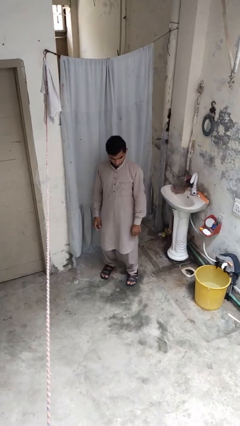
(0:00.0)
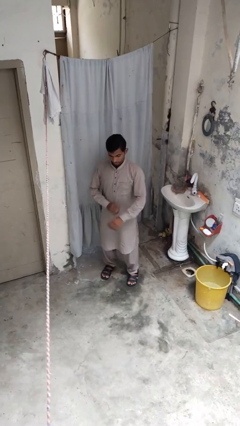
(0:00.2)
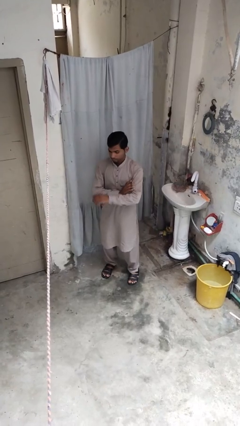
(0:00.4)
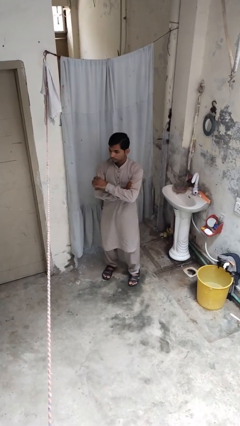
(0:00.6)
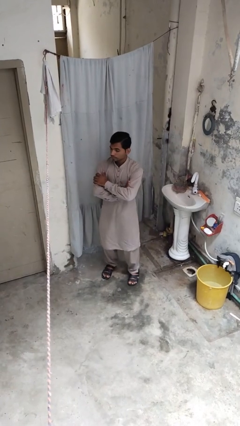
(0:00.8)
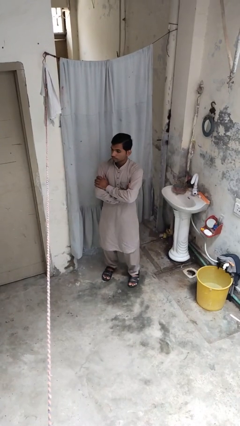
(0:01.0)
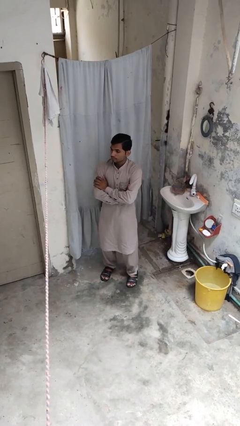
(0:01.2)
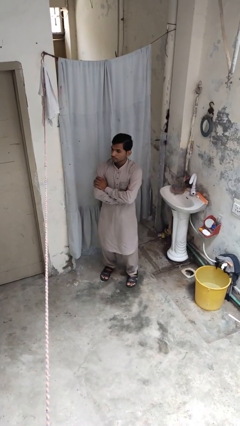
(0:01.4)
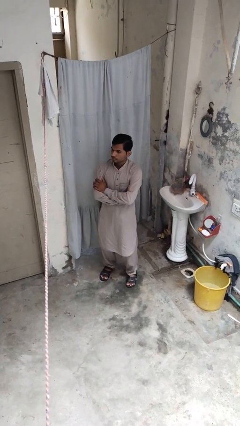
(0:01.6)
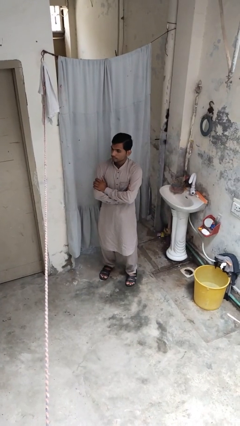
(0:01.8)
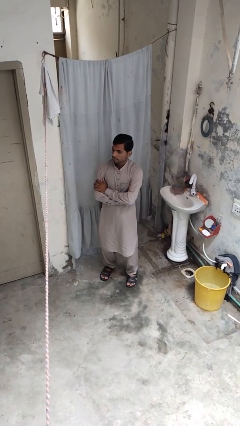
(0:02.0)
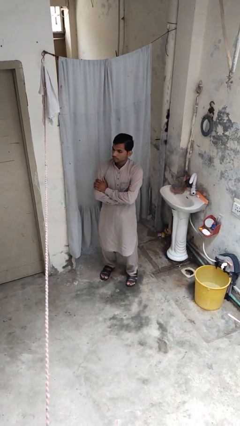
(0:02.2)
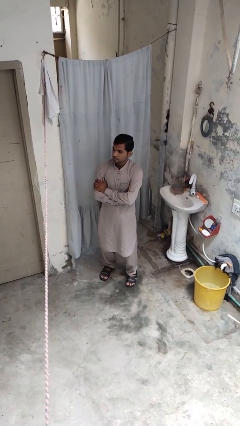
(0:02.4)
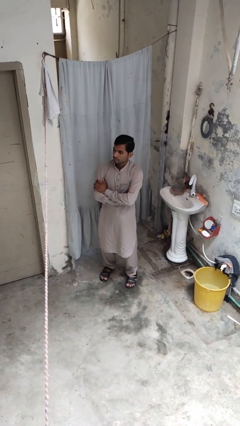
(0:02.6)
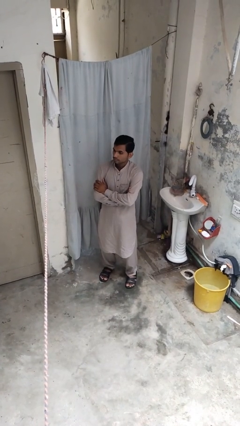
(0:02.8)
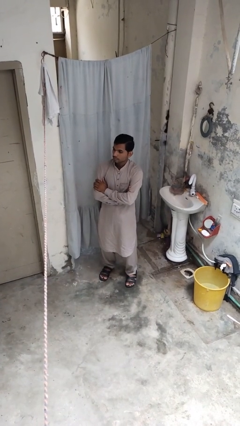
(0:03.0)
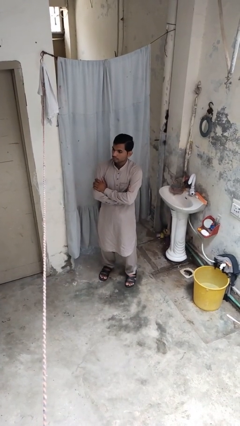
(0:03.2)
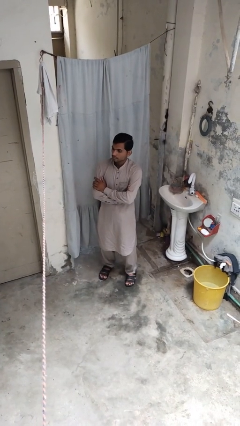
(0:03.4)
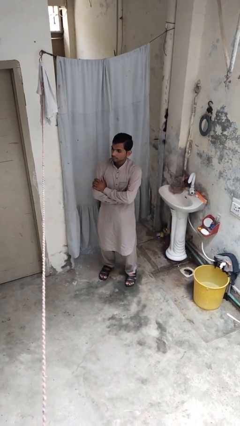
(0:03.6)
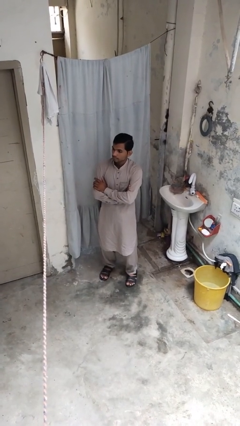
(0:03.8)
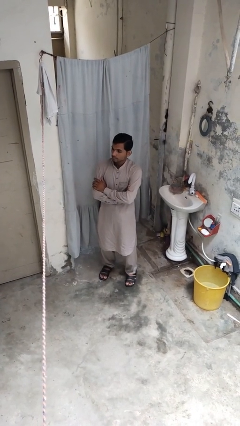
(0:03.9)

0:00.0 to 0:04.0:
person crosses arms

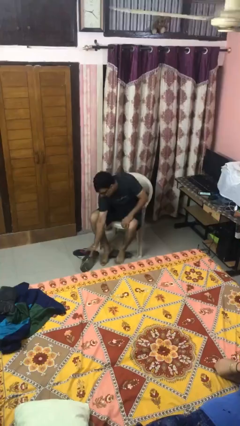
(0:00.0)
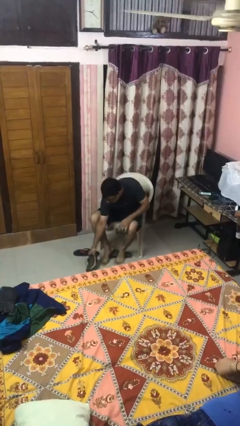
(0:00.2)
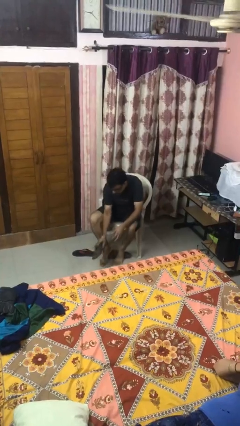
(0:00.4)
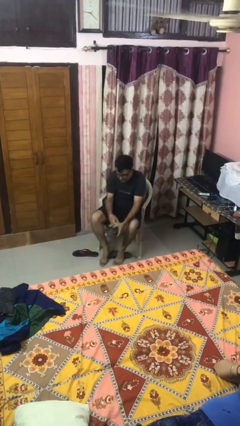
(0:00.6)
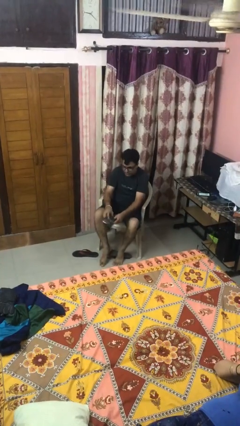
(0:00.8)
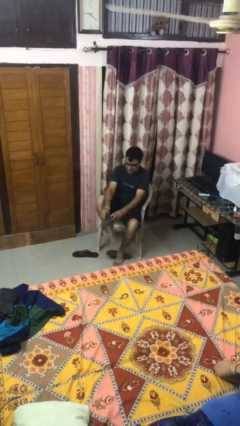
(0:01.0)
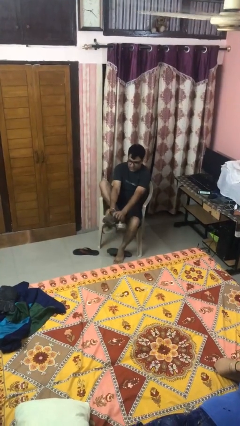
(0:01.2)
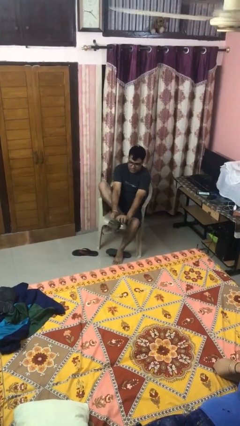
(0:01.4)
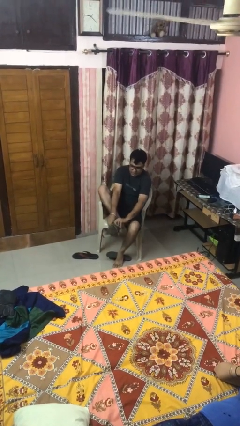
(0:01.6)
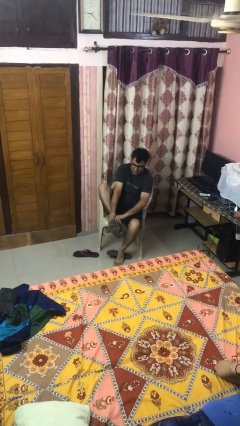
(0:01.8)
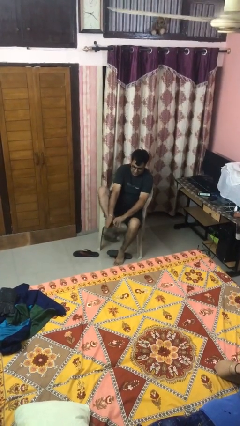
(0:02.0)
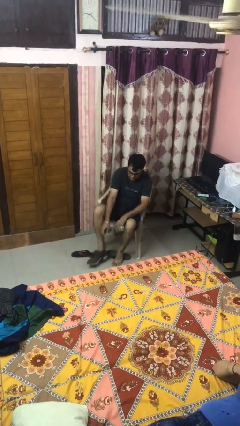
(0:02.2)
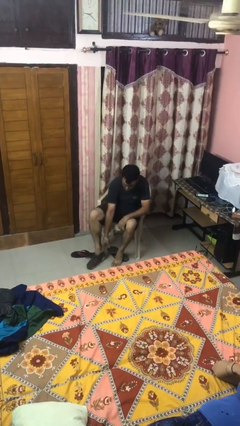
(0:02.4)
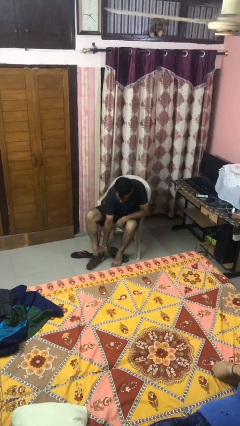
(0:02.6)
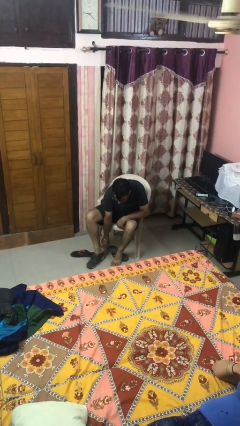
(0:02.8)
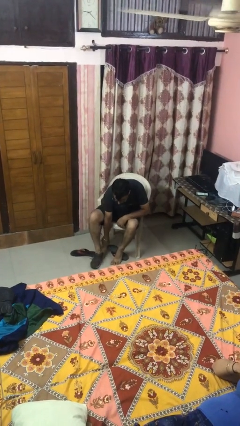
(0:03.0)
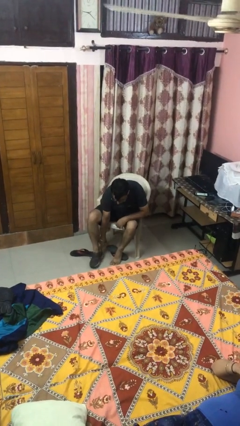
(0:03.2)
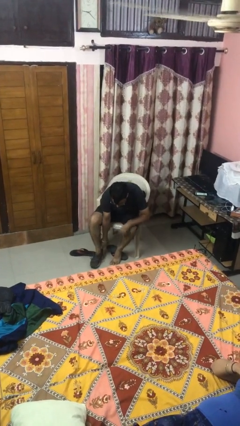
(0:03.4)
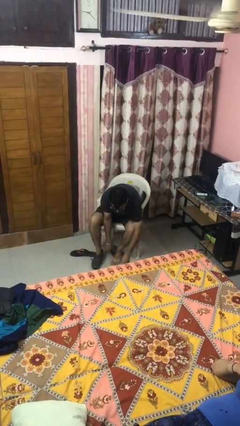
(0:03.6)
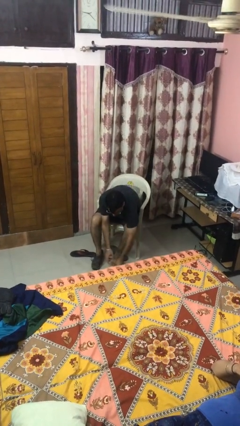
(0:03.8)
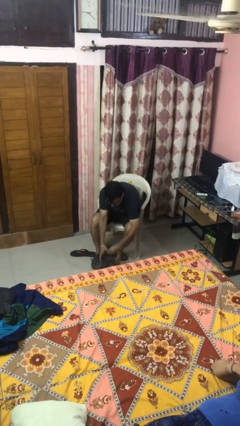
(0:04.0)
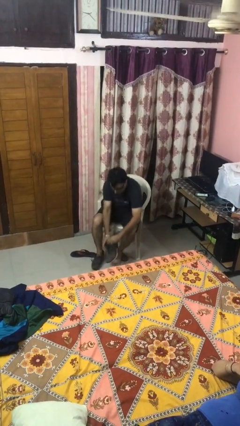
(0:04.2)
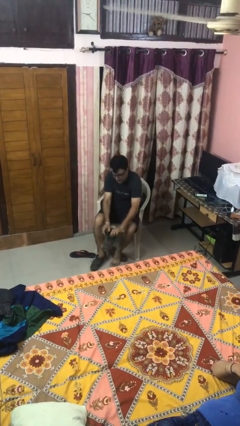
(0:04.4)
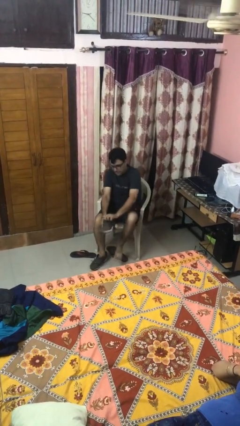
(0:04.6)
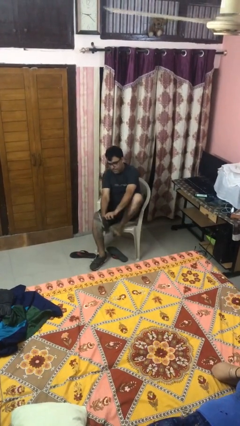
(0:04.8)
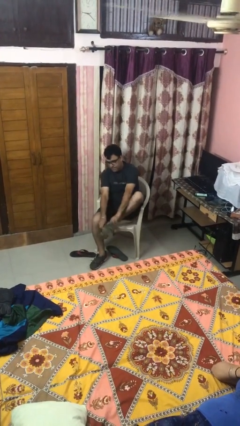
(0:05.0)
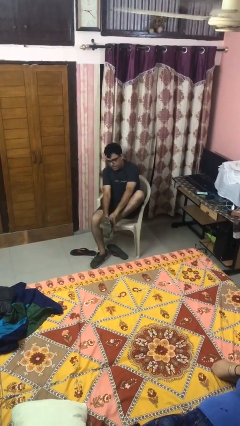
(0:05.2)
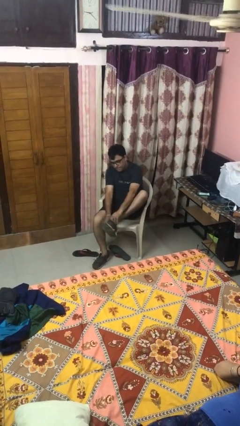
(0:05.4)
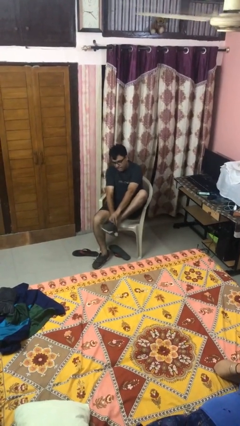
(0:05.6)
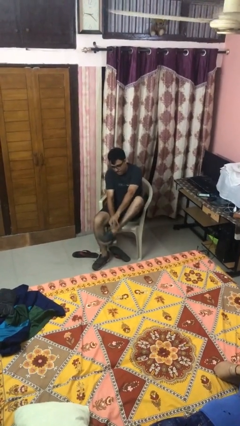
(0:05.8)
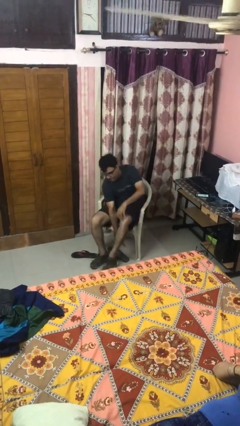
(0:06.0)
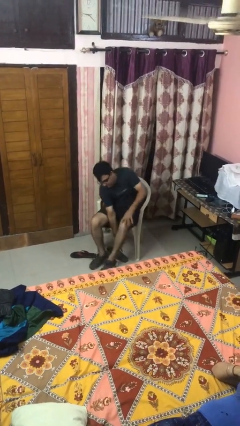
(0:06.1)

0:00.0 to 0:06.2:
person puts on shoes

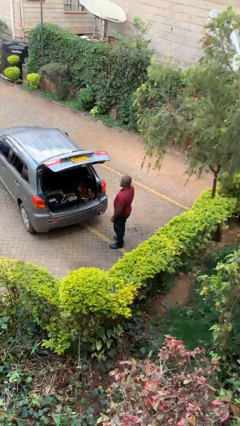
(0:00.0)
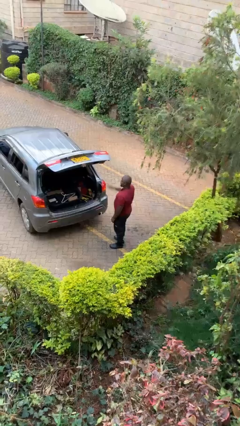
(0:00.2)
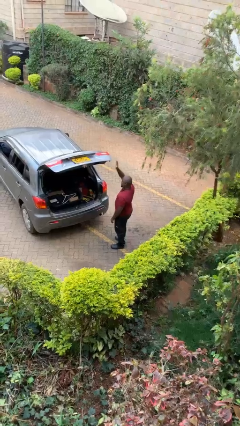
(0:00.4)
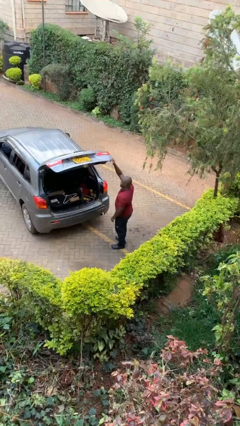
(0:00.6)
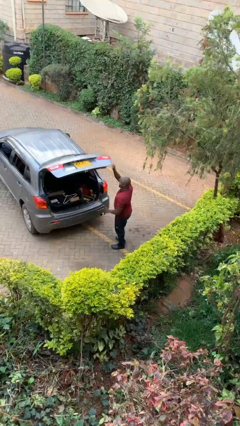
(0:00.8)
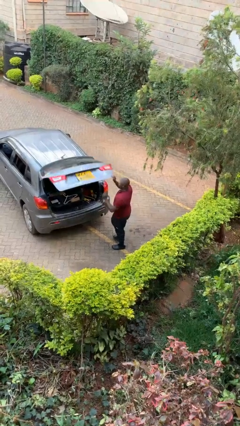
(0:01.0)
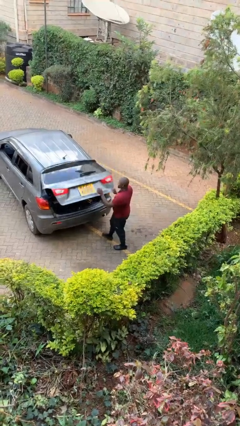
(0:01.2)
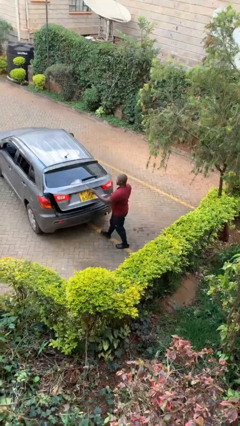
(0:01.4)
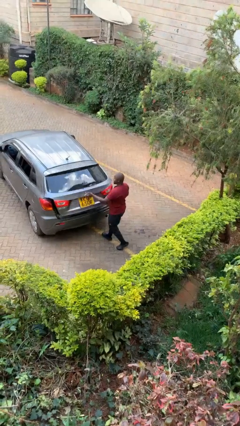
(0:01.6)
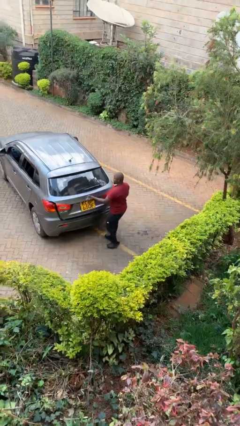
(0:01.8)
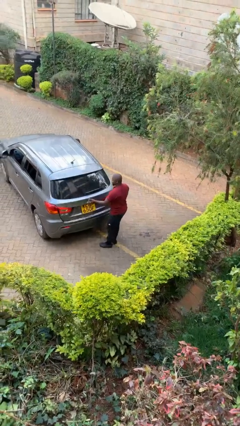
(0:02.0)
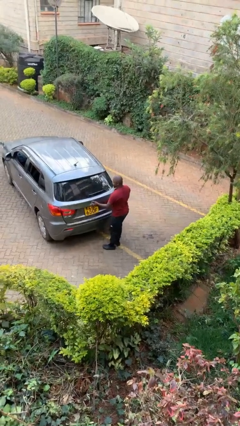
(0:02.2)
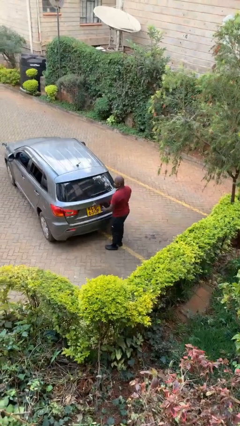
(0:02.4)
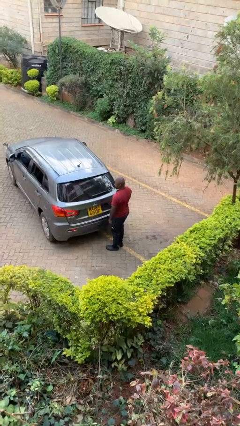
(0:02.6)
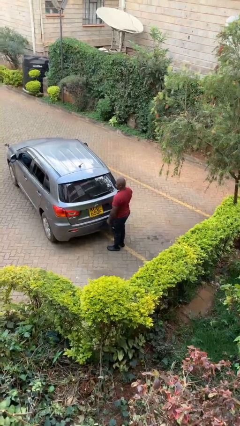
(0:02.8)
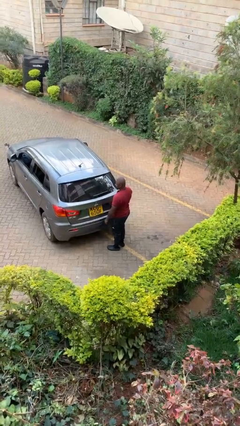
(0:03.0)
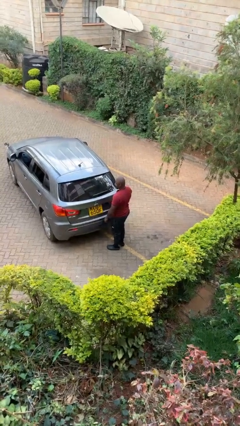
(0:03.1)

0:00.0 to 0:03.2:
person closes car trunk

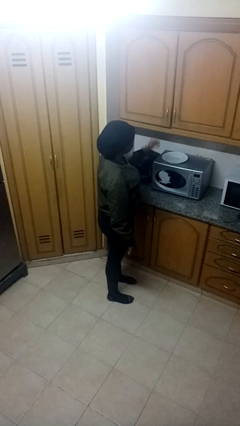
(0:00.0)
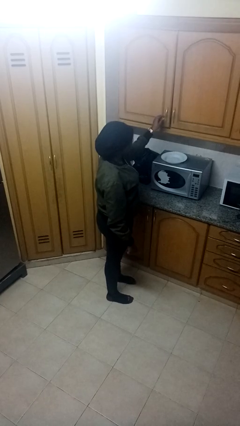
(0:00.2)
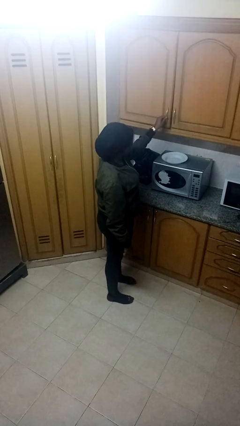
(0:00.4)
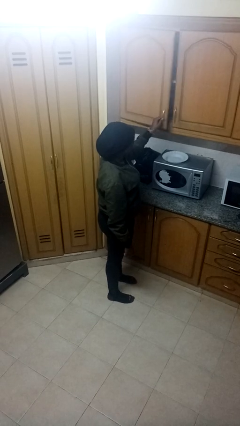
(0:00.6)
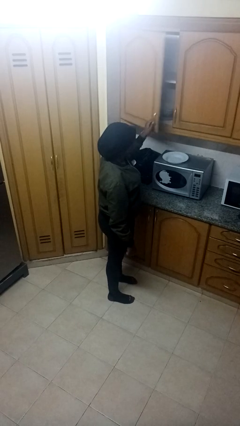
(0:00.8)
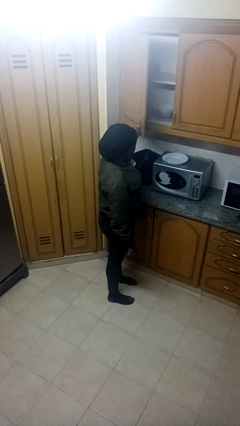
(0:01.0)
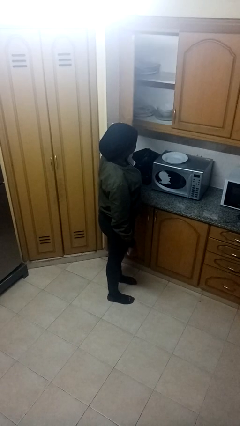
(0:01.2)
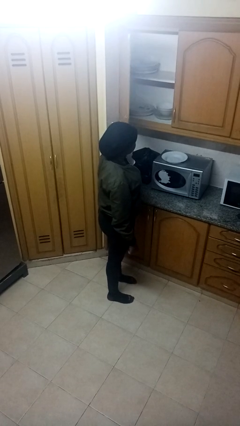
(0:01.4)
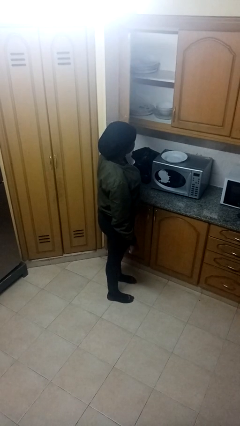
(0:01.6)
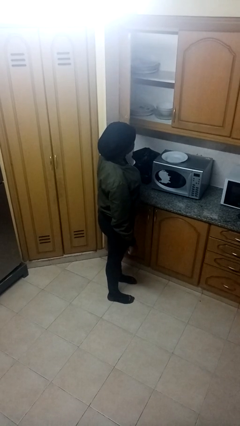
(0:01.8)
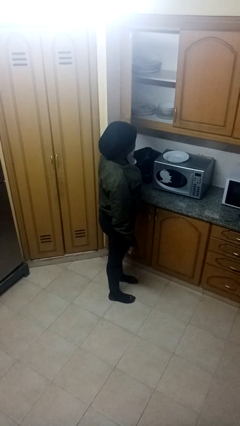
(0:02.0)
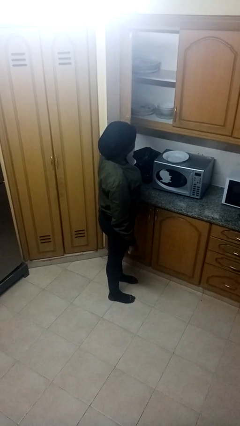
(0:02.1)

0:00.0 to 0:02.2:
person opens cabinet

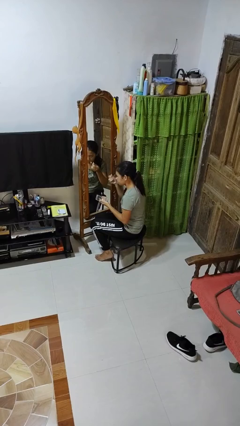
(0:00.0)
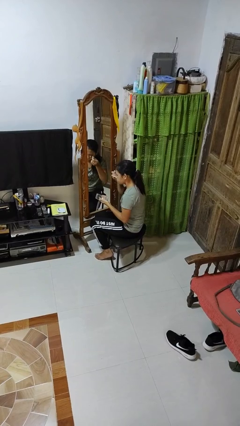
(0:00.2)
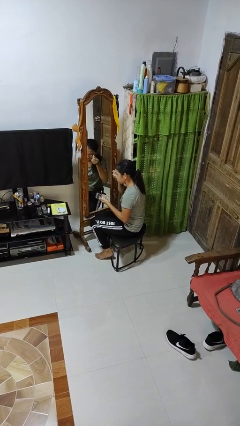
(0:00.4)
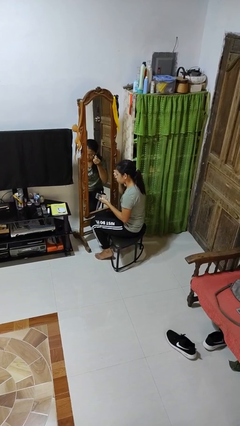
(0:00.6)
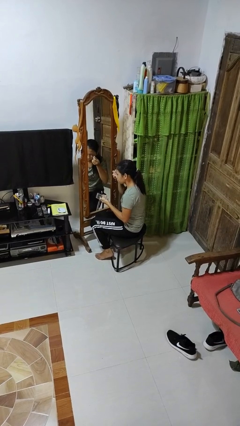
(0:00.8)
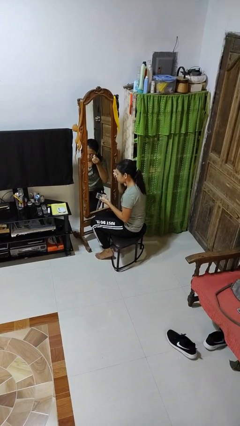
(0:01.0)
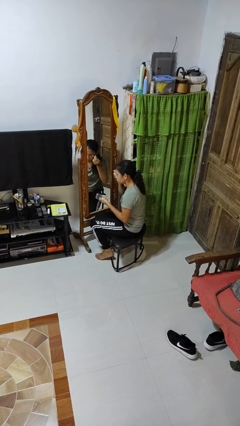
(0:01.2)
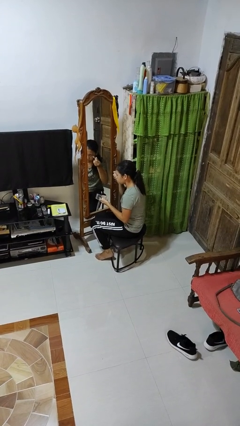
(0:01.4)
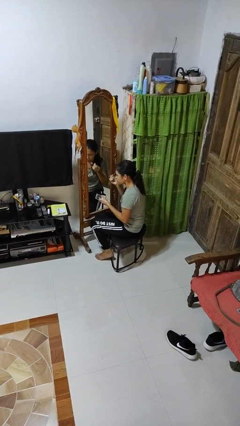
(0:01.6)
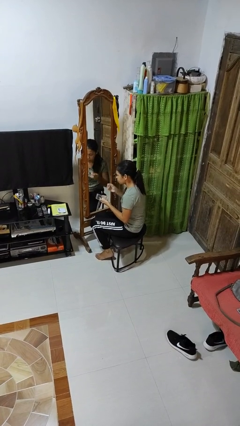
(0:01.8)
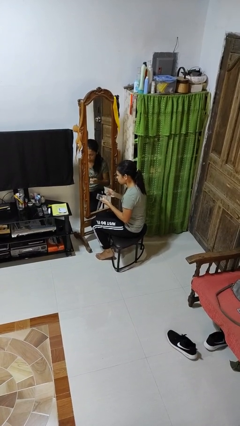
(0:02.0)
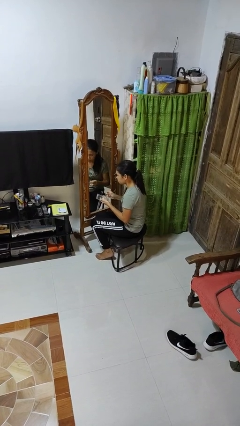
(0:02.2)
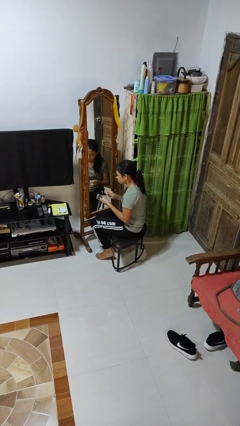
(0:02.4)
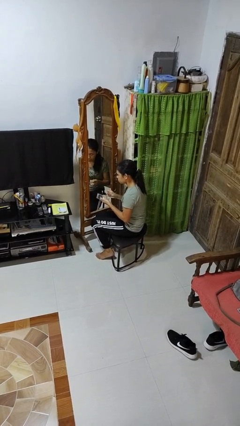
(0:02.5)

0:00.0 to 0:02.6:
person applies eye makeup
